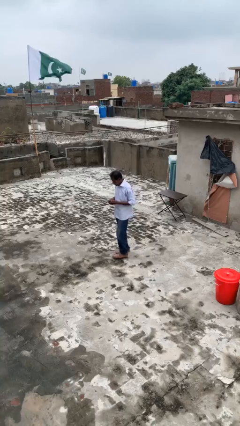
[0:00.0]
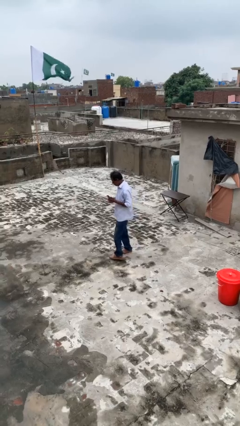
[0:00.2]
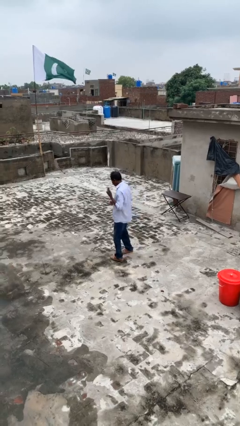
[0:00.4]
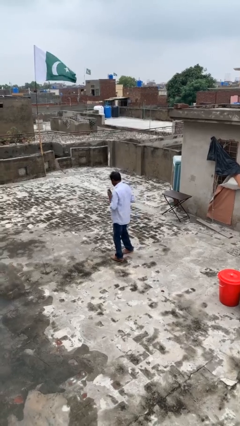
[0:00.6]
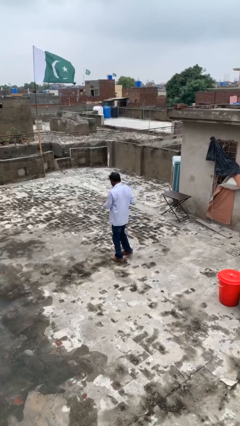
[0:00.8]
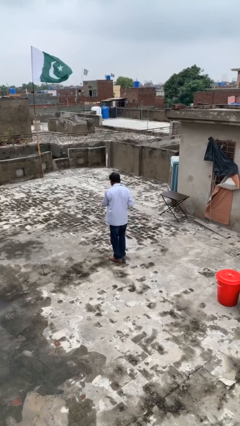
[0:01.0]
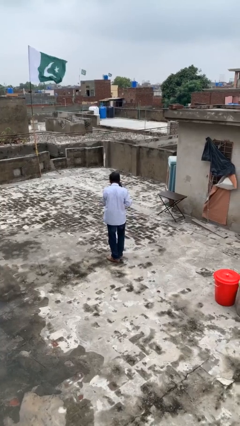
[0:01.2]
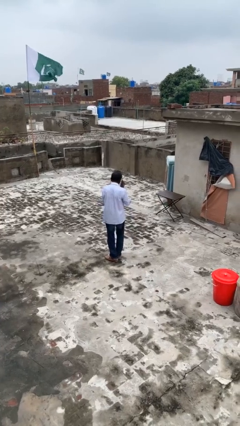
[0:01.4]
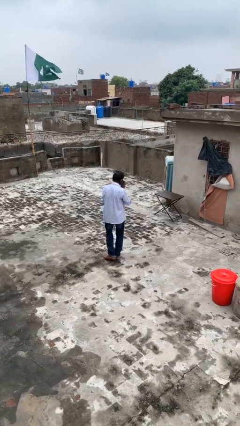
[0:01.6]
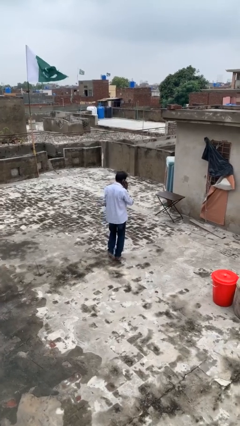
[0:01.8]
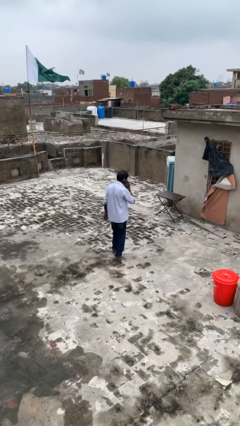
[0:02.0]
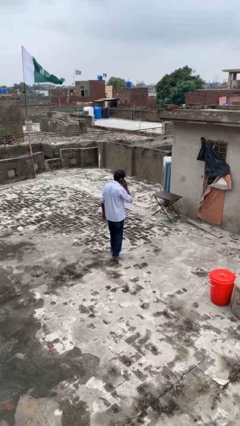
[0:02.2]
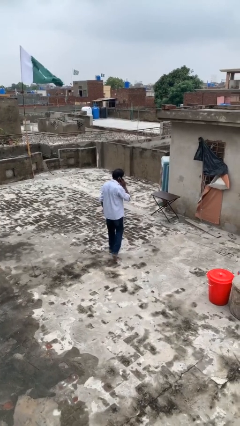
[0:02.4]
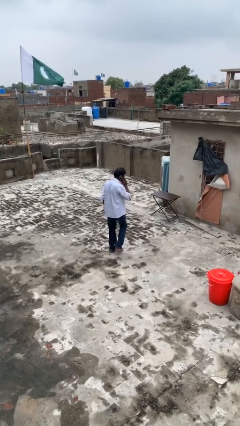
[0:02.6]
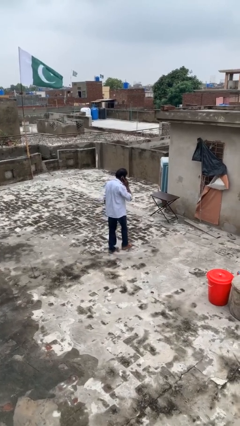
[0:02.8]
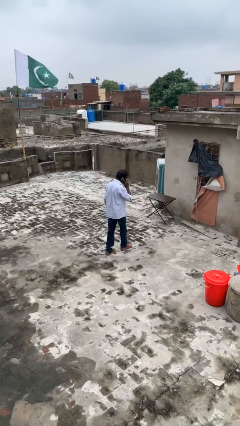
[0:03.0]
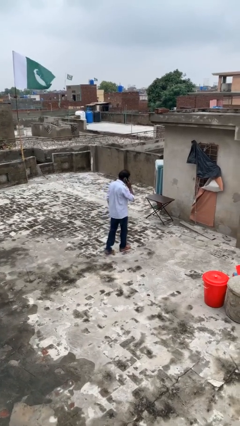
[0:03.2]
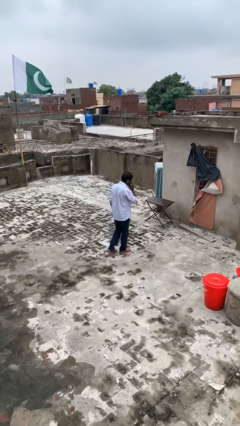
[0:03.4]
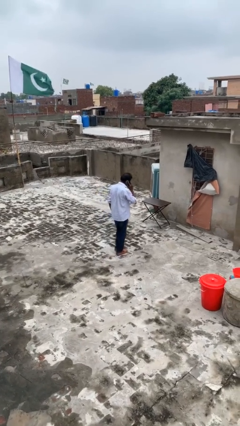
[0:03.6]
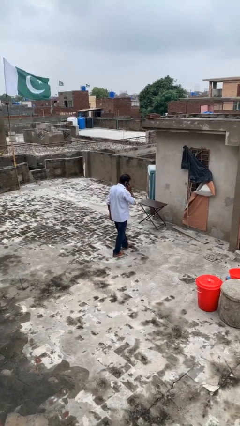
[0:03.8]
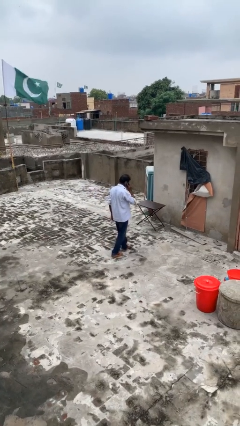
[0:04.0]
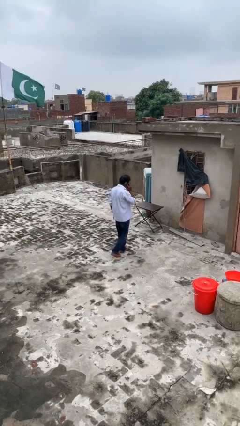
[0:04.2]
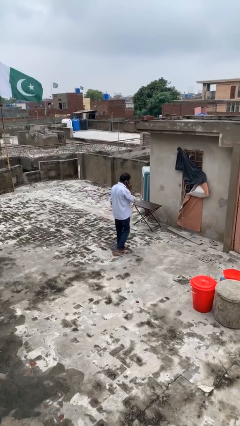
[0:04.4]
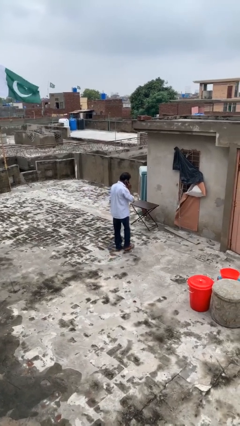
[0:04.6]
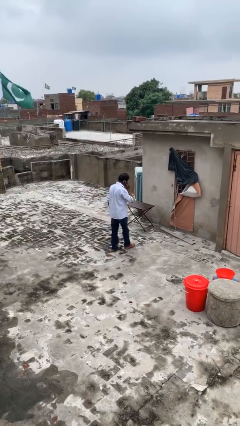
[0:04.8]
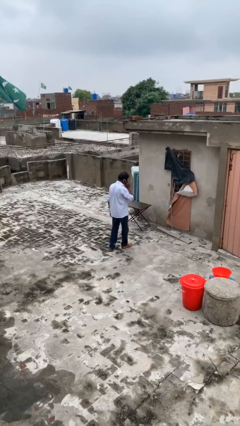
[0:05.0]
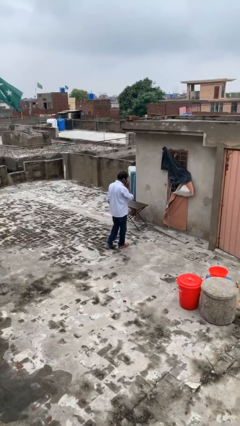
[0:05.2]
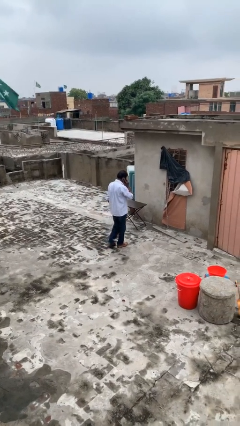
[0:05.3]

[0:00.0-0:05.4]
person talks on phone

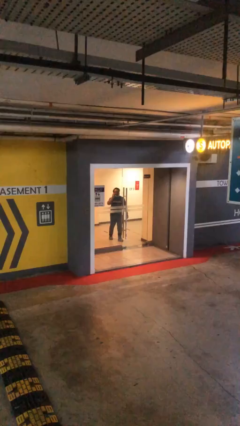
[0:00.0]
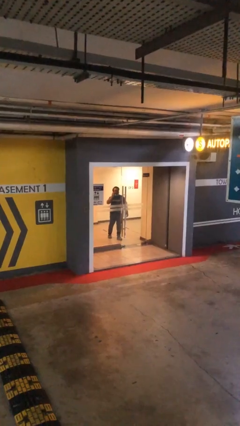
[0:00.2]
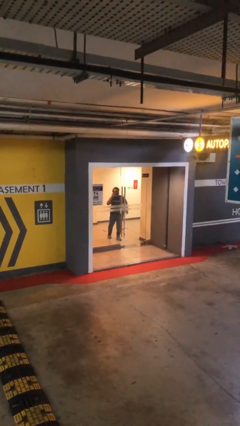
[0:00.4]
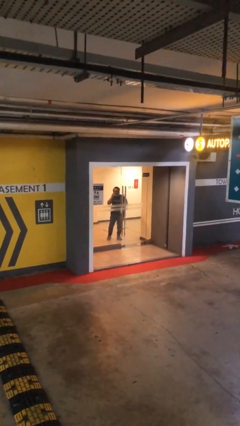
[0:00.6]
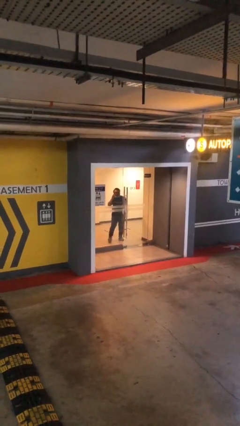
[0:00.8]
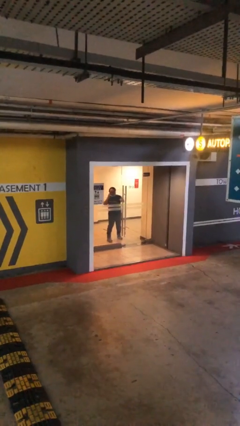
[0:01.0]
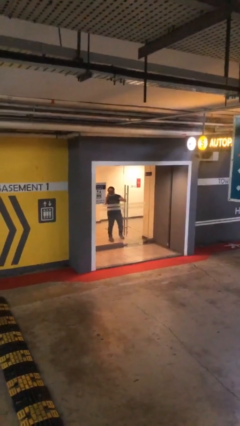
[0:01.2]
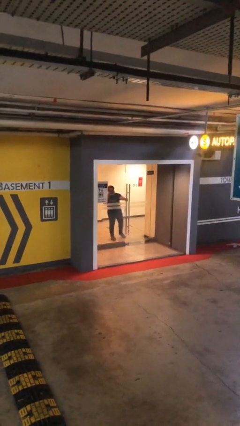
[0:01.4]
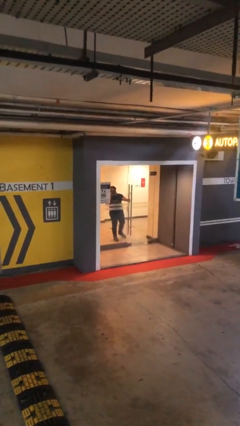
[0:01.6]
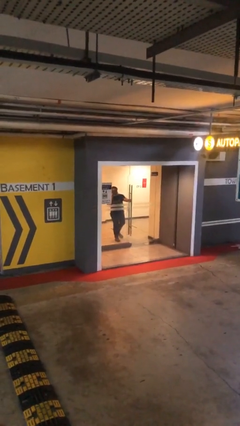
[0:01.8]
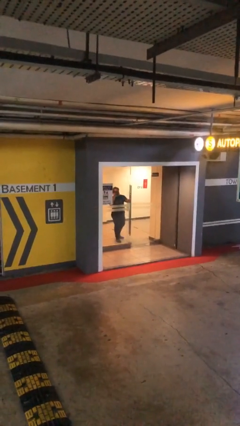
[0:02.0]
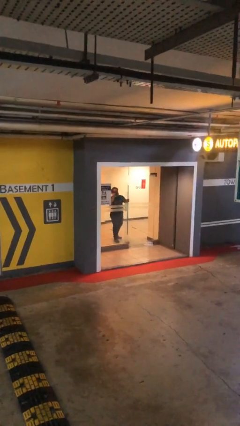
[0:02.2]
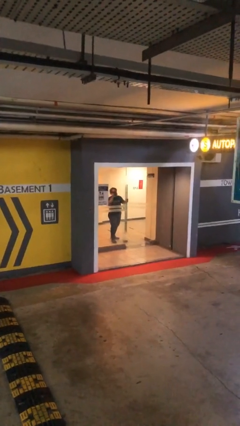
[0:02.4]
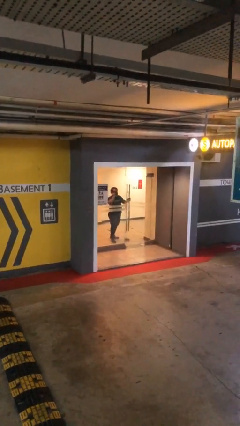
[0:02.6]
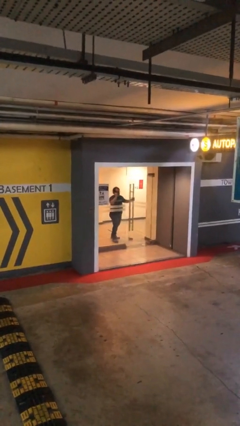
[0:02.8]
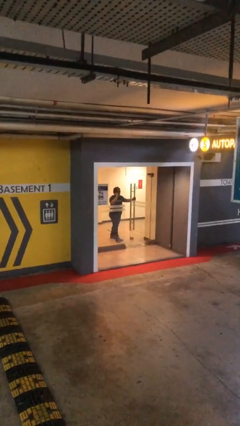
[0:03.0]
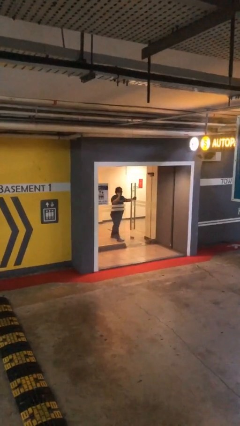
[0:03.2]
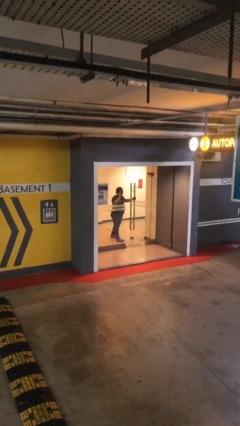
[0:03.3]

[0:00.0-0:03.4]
person opens facility door

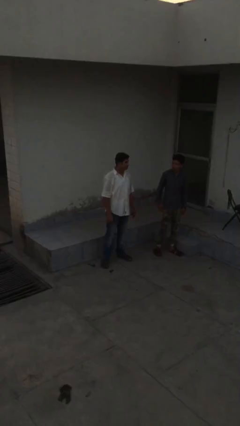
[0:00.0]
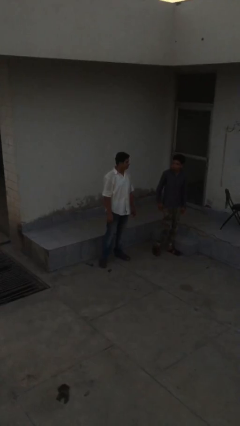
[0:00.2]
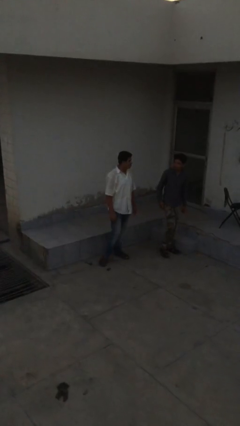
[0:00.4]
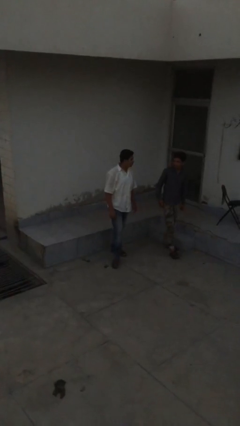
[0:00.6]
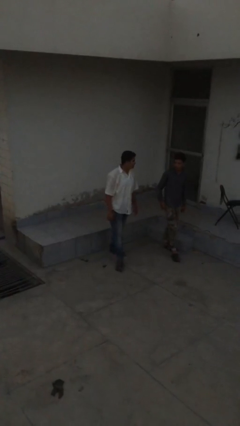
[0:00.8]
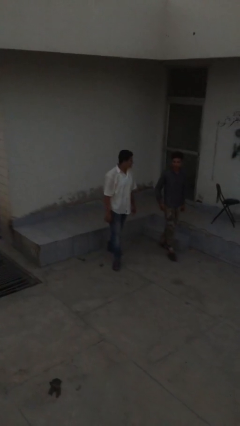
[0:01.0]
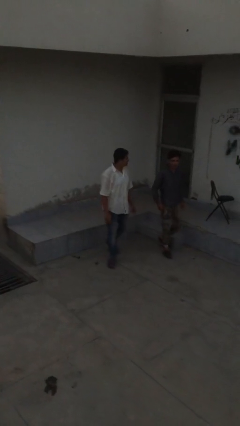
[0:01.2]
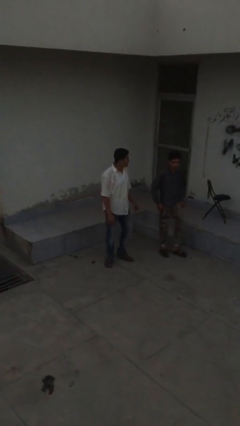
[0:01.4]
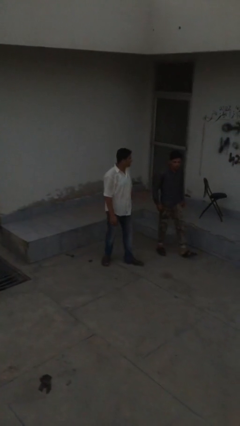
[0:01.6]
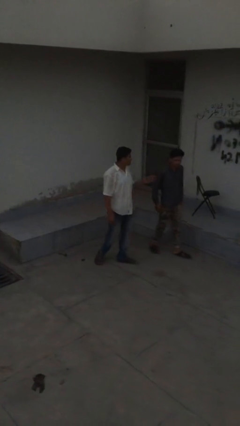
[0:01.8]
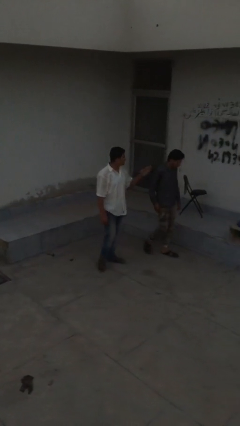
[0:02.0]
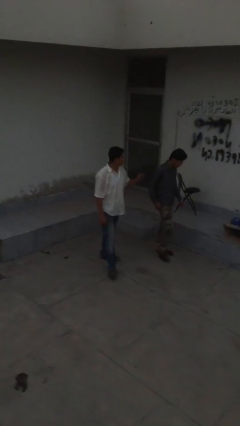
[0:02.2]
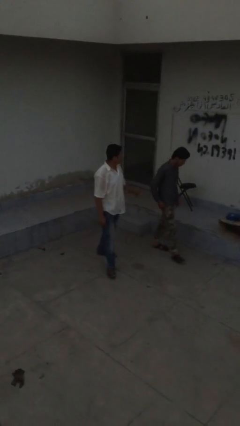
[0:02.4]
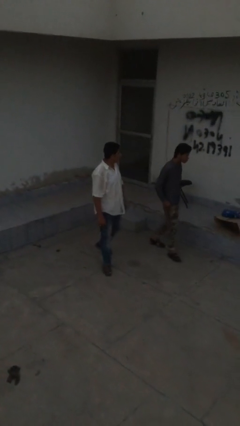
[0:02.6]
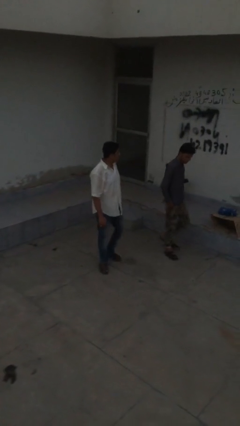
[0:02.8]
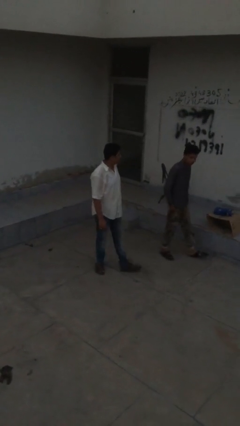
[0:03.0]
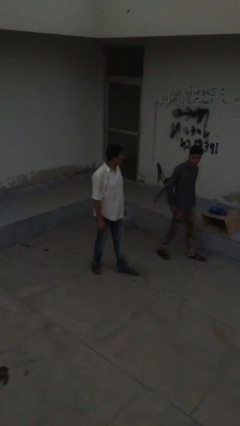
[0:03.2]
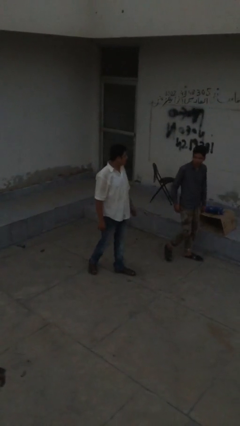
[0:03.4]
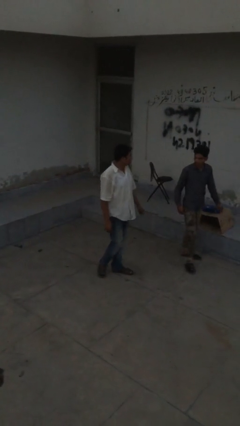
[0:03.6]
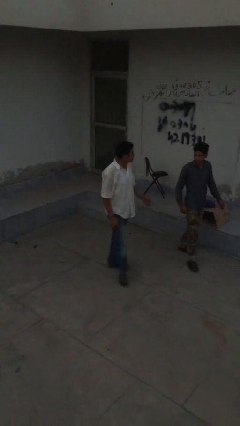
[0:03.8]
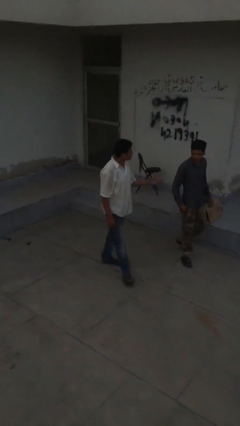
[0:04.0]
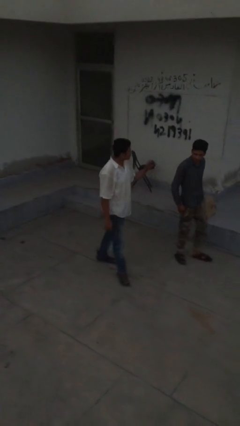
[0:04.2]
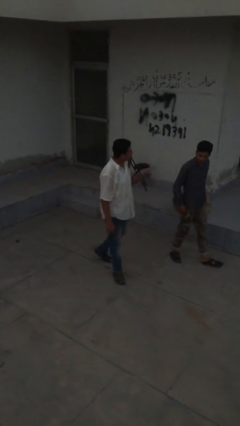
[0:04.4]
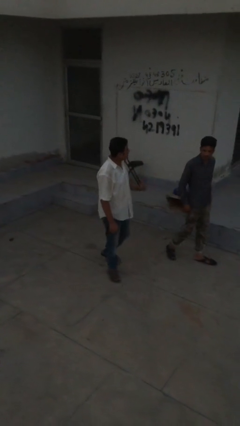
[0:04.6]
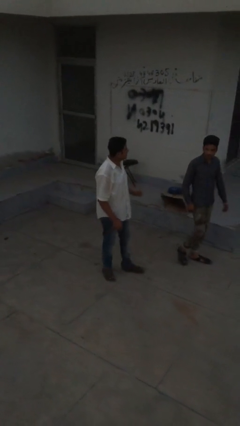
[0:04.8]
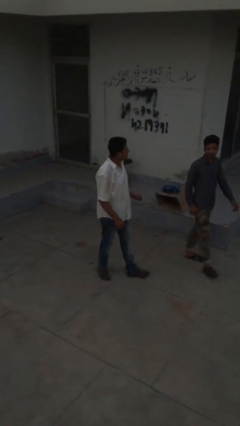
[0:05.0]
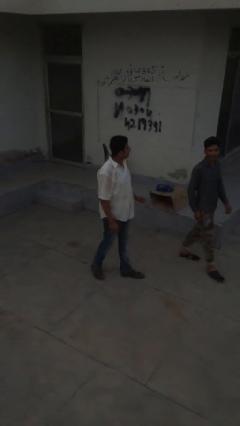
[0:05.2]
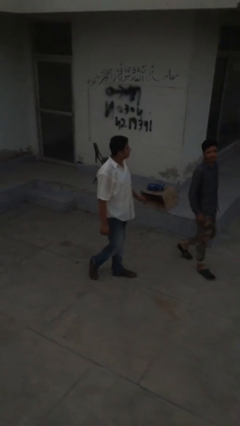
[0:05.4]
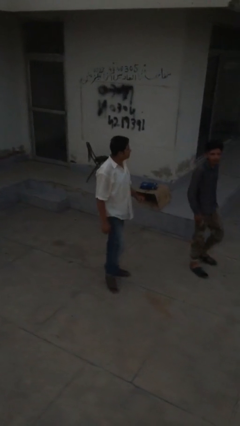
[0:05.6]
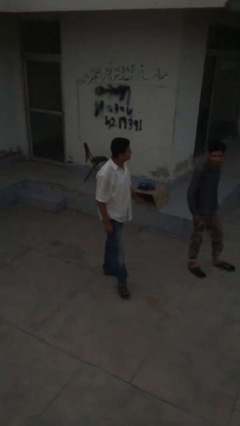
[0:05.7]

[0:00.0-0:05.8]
person talks to person

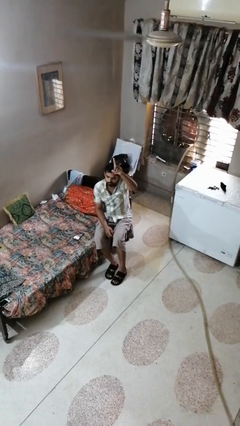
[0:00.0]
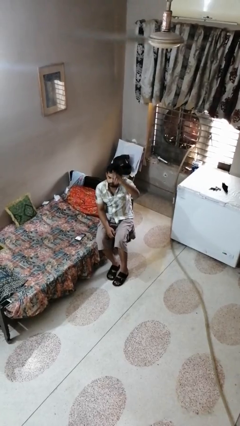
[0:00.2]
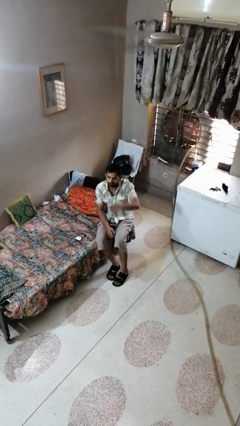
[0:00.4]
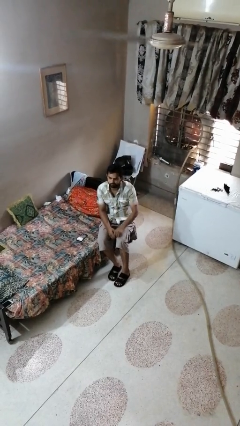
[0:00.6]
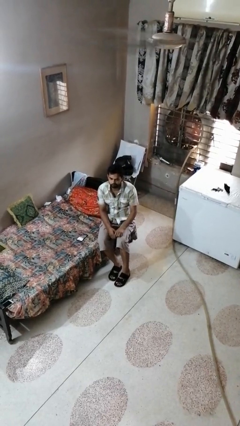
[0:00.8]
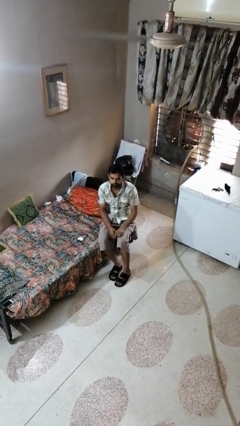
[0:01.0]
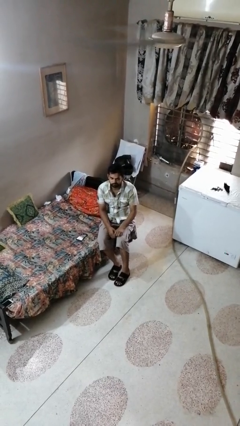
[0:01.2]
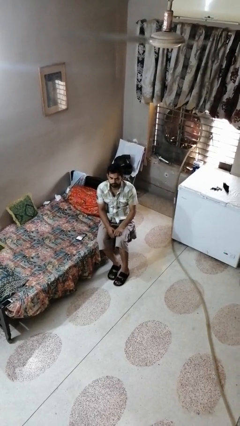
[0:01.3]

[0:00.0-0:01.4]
person gestures lower hand

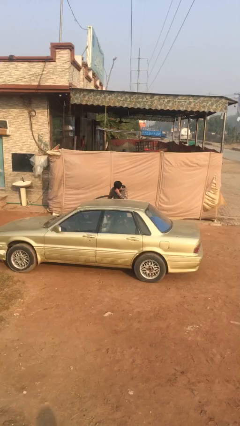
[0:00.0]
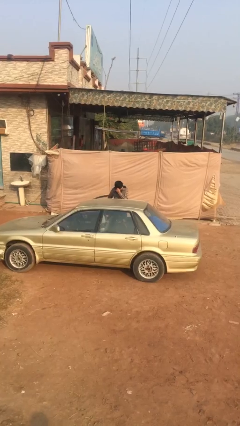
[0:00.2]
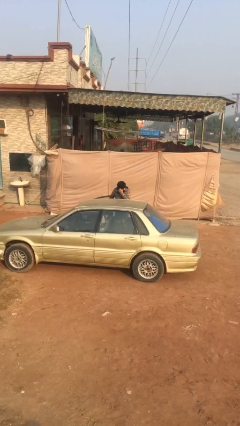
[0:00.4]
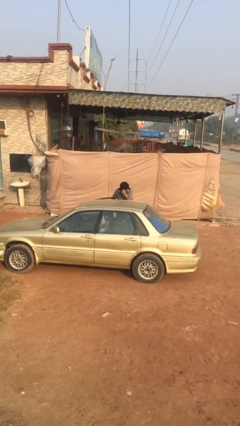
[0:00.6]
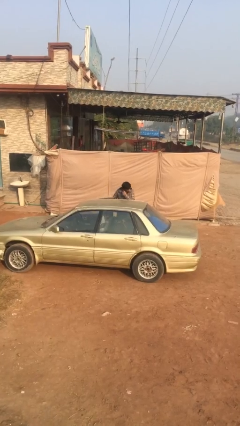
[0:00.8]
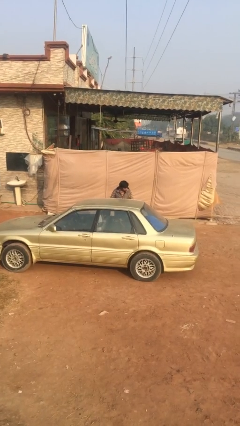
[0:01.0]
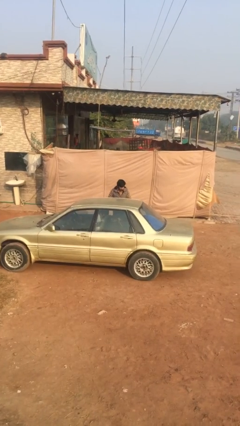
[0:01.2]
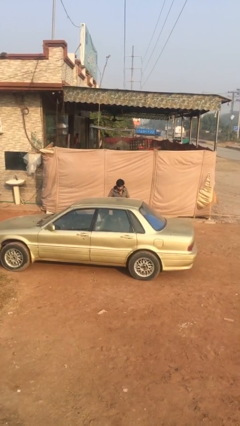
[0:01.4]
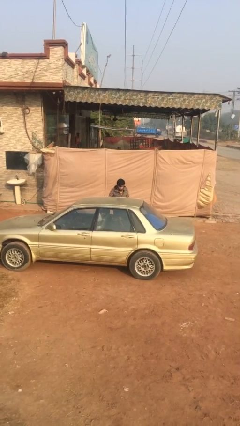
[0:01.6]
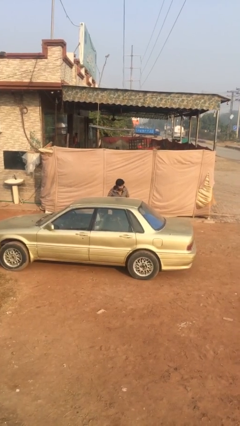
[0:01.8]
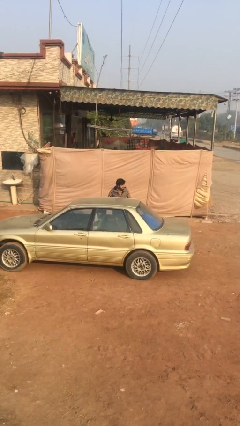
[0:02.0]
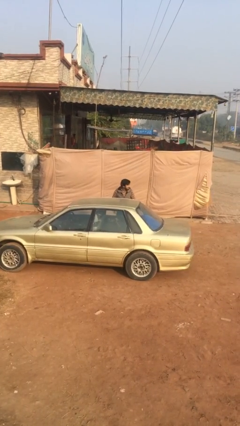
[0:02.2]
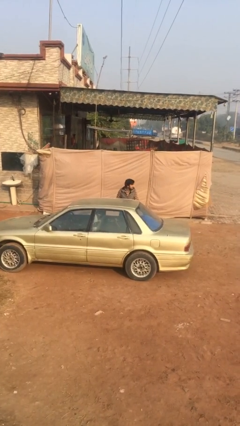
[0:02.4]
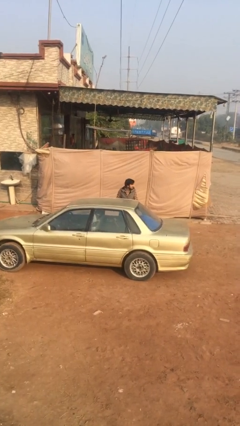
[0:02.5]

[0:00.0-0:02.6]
person closes car door
